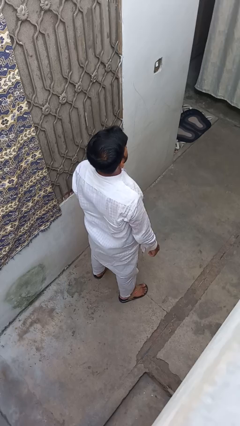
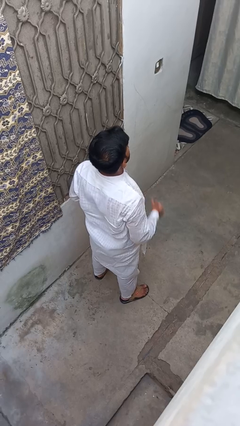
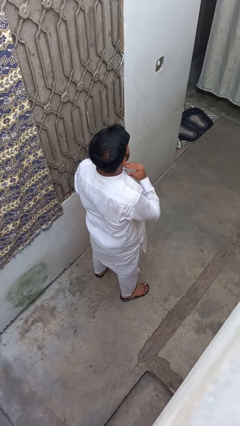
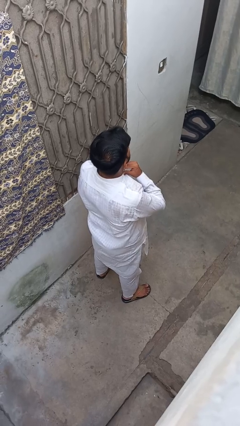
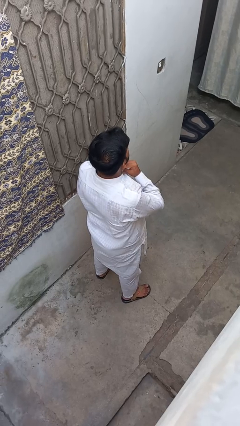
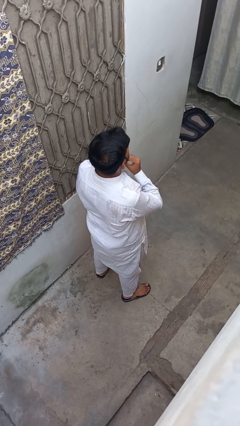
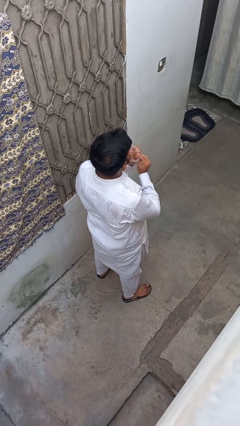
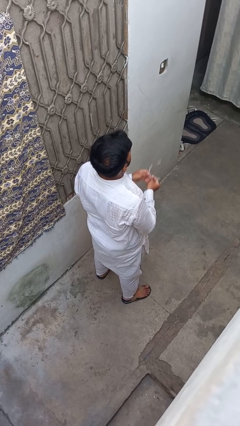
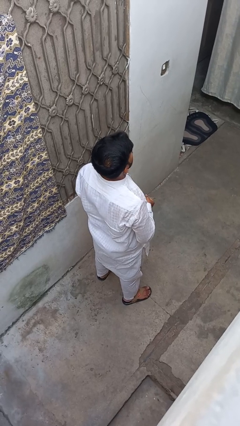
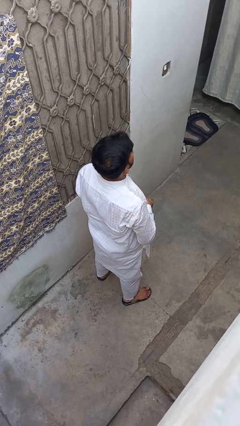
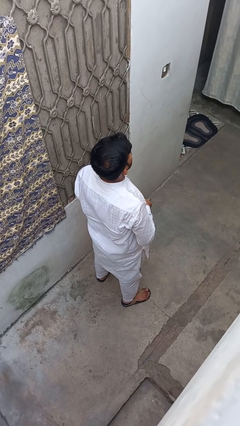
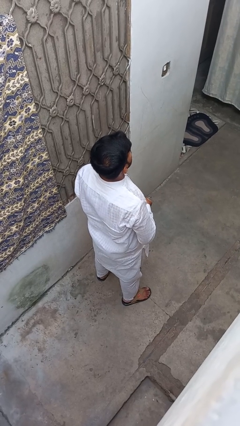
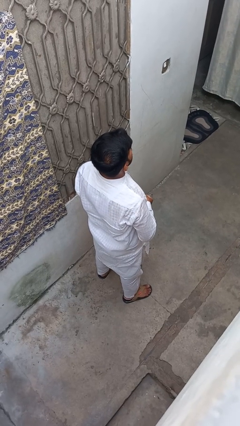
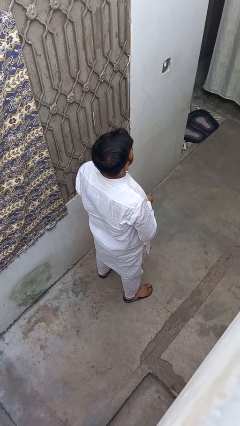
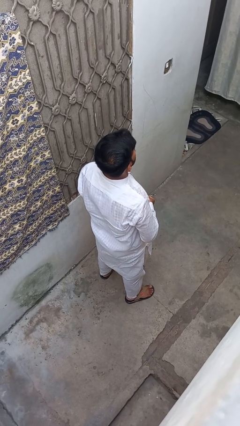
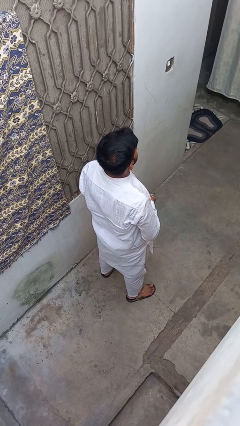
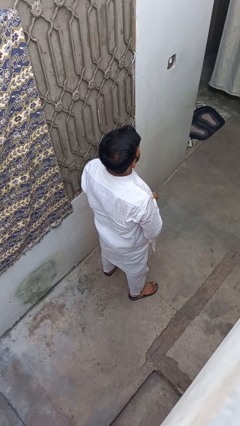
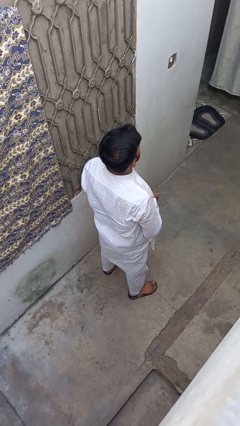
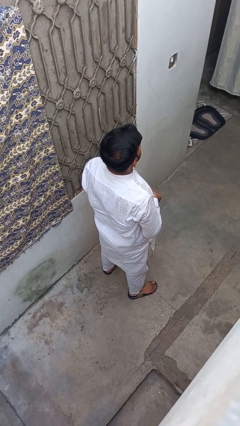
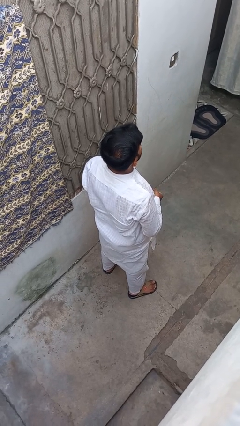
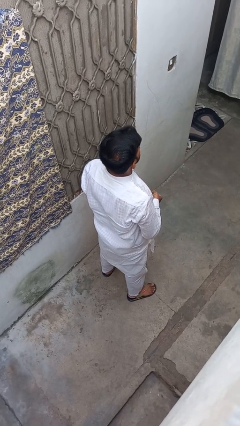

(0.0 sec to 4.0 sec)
person takes off necklace

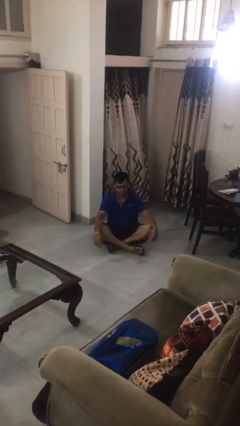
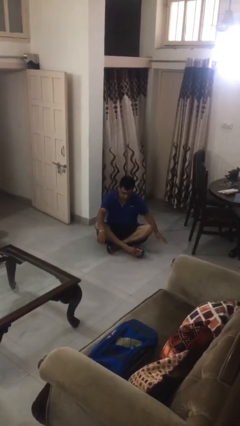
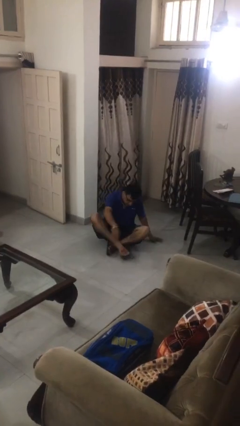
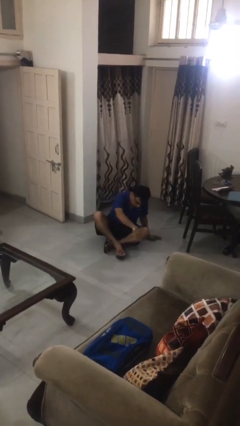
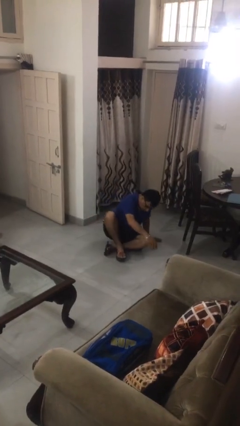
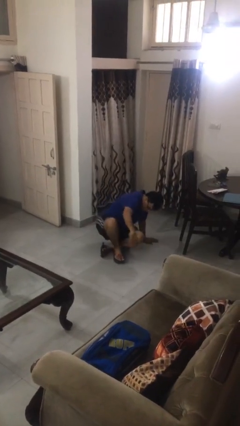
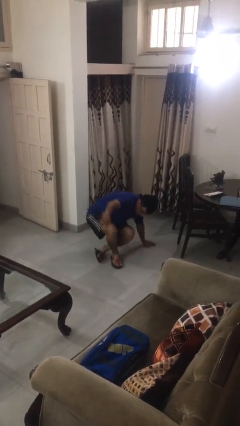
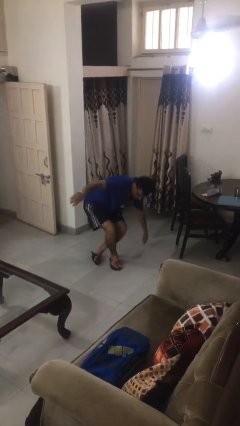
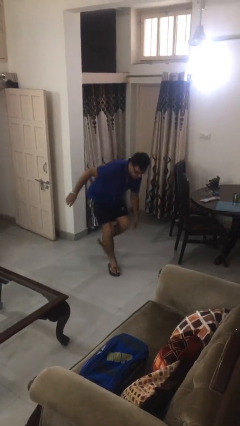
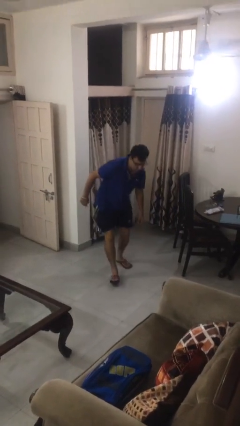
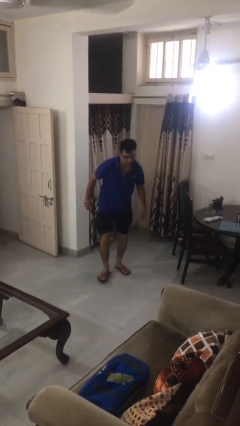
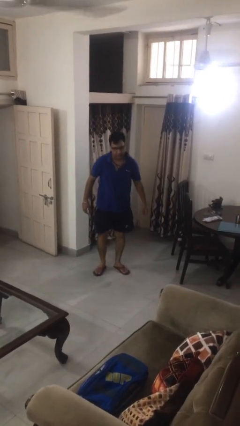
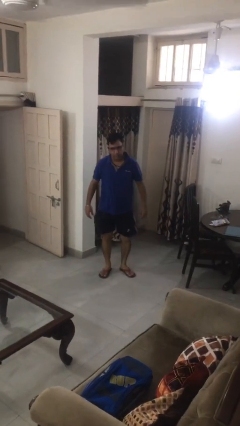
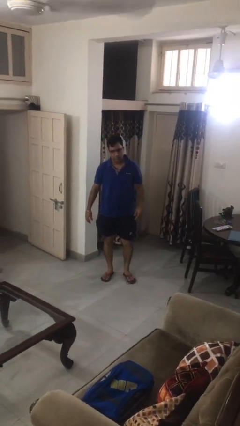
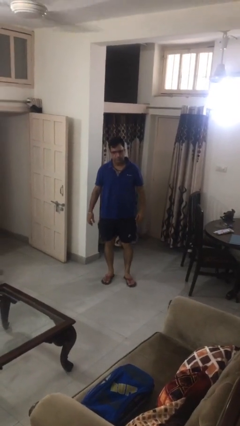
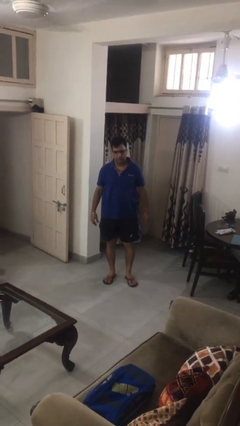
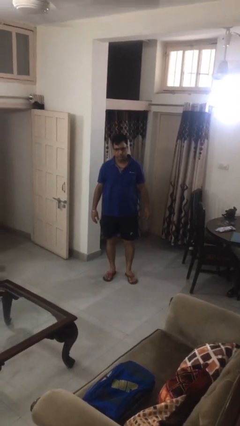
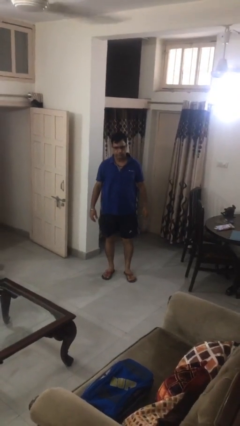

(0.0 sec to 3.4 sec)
person stands up from floor

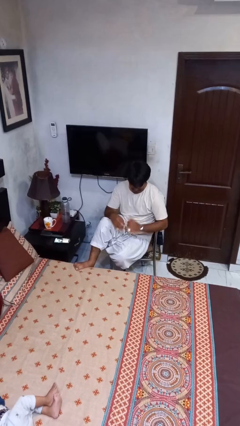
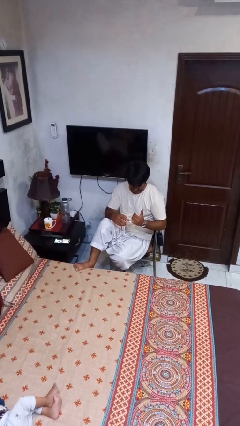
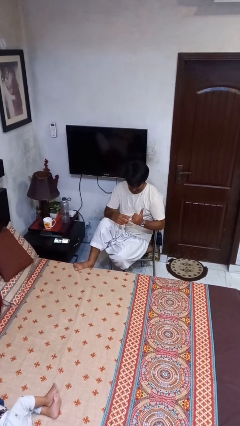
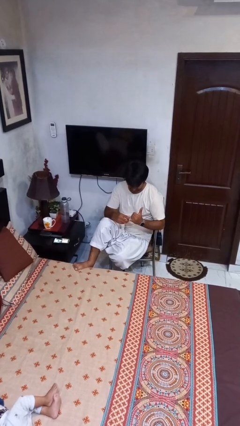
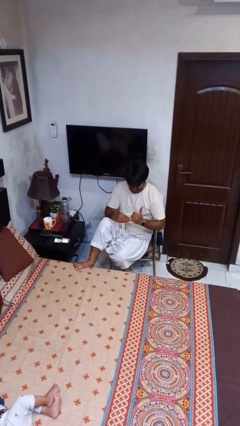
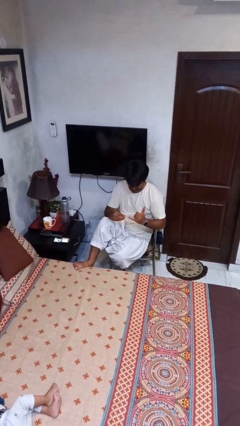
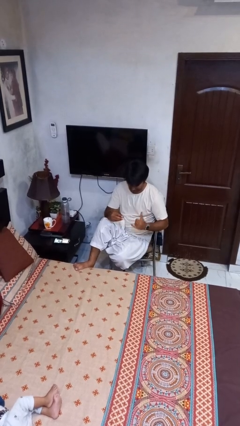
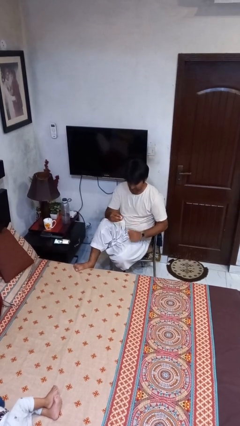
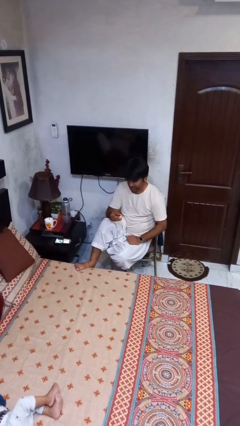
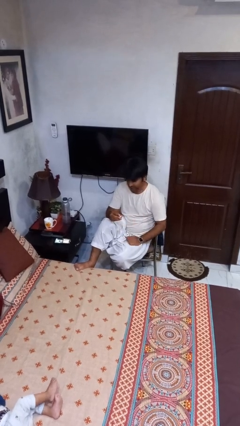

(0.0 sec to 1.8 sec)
person takes off ring

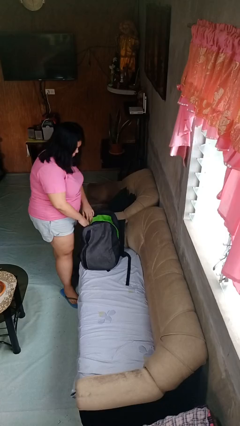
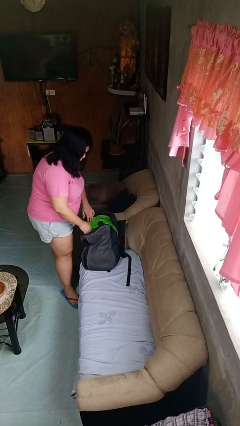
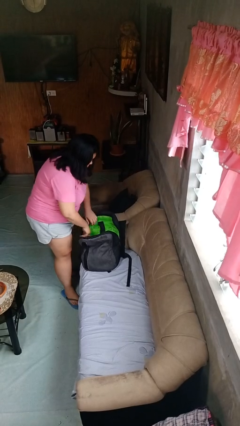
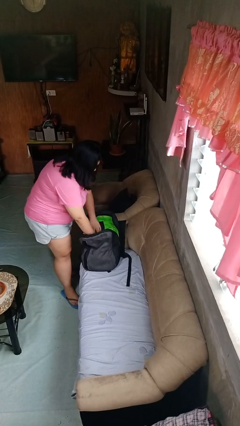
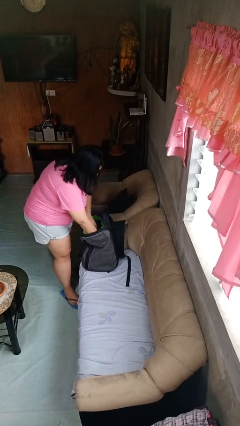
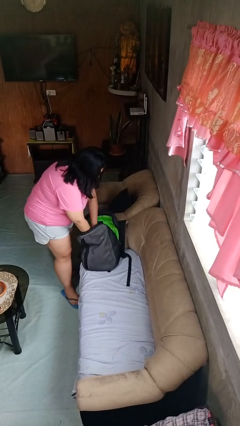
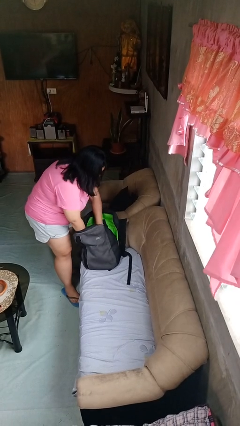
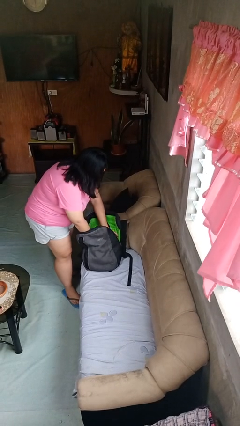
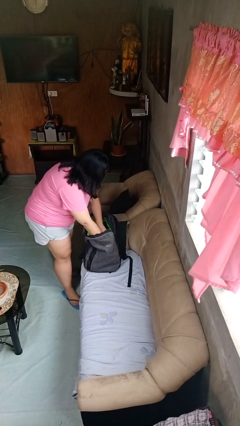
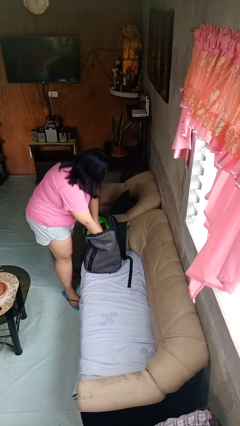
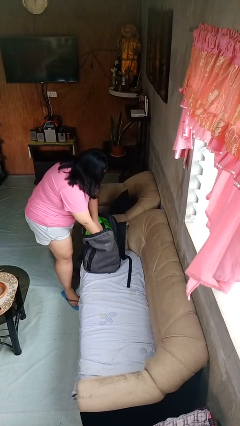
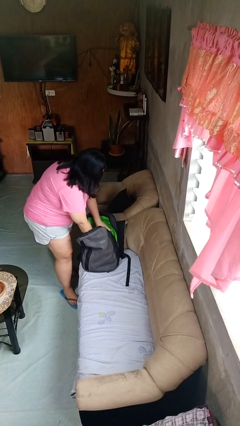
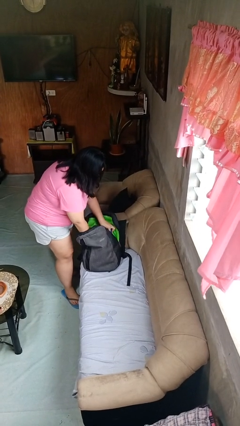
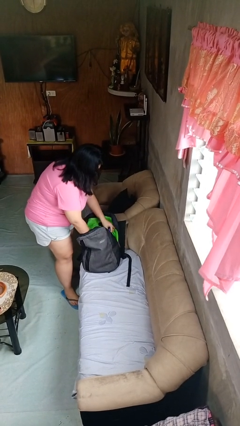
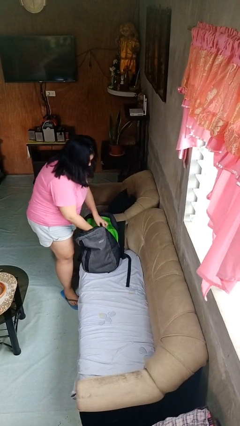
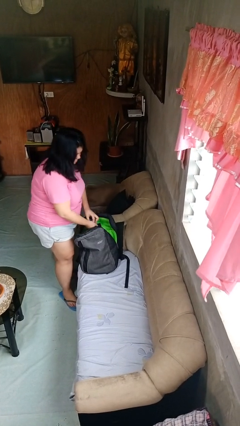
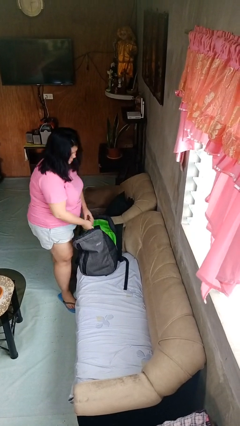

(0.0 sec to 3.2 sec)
person searches in backpack

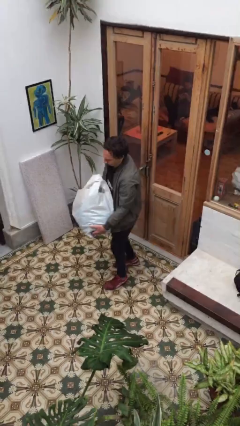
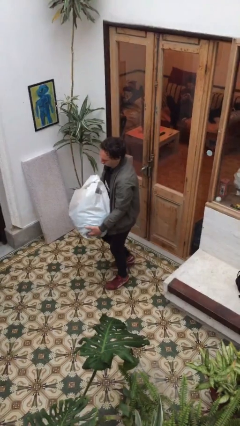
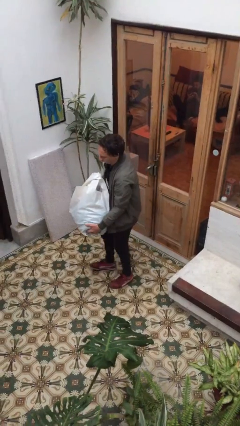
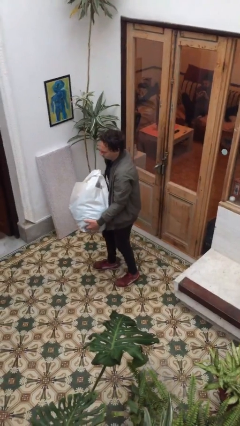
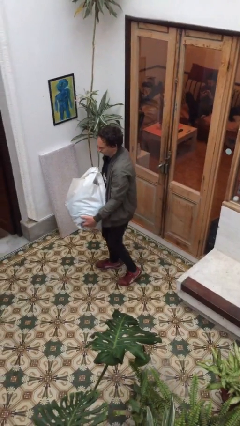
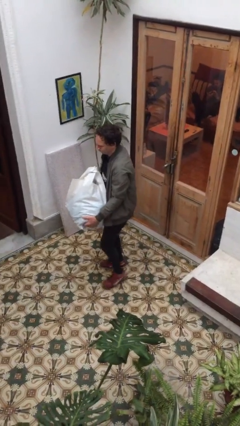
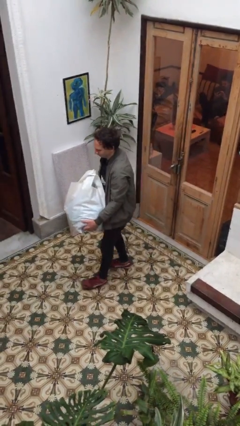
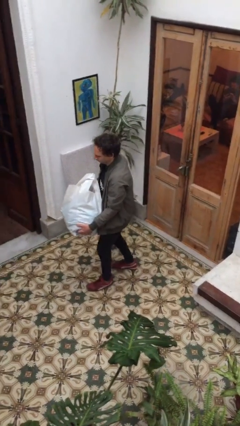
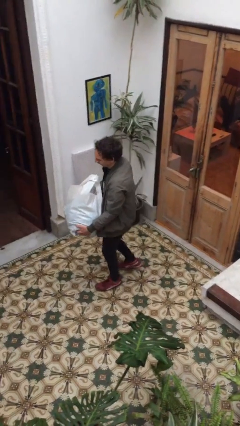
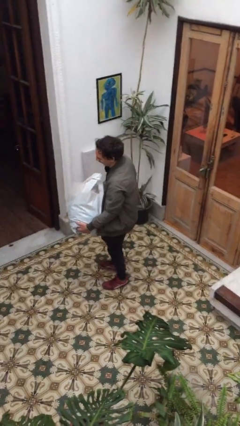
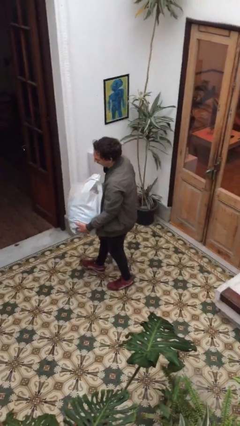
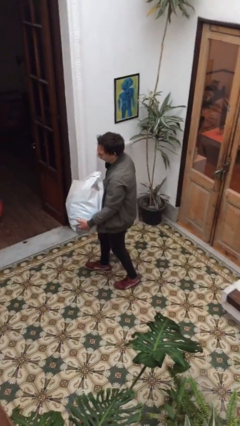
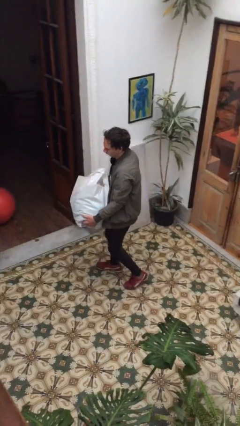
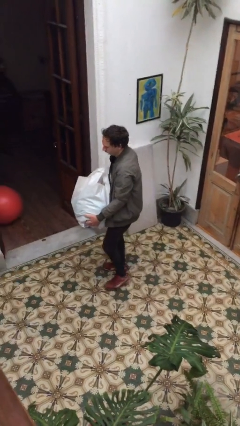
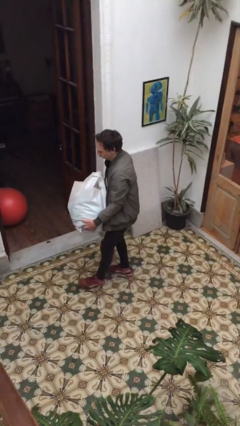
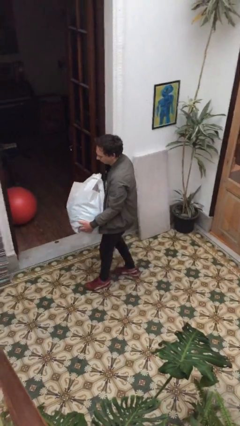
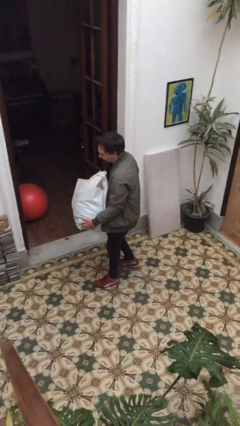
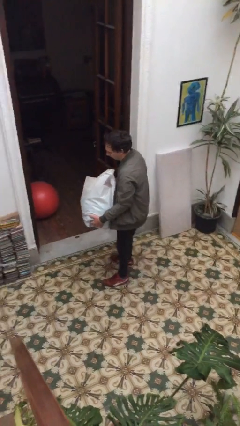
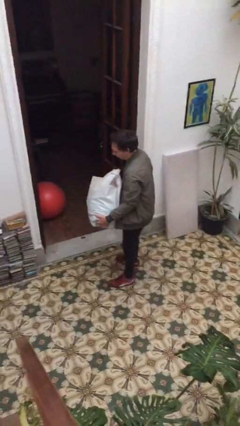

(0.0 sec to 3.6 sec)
person carries heavy object

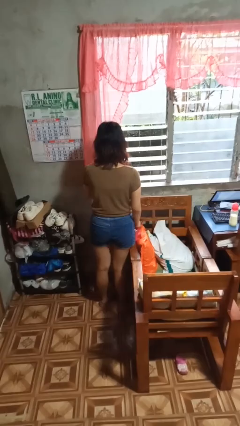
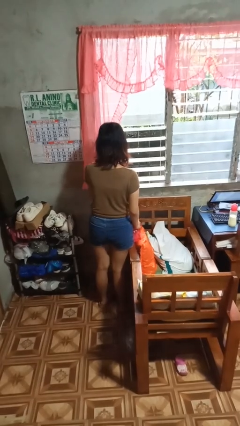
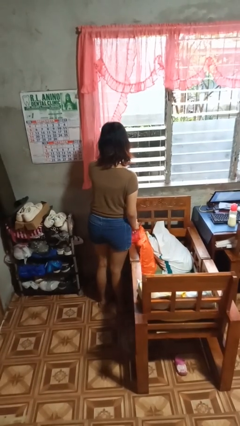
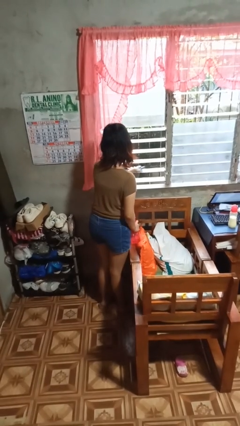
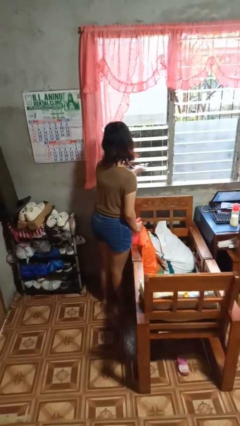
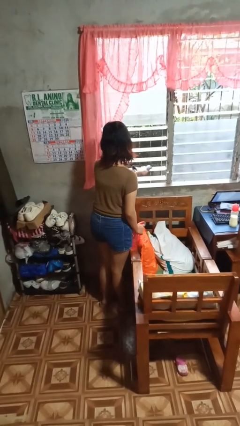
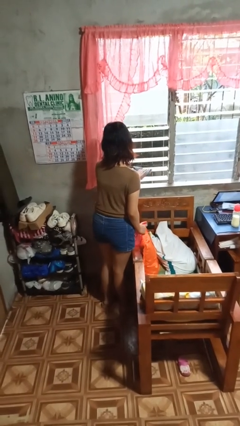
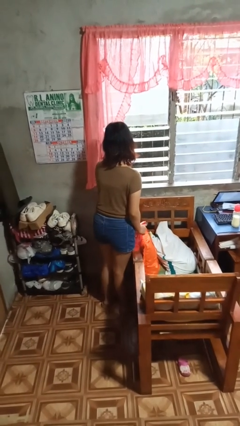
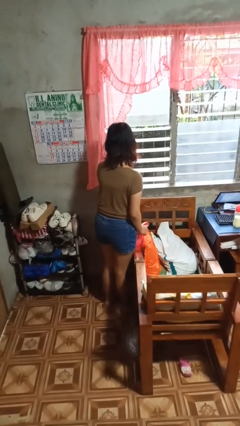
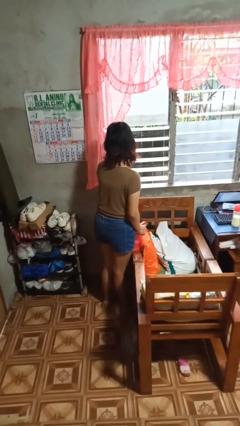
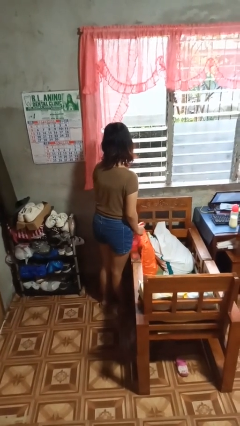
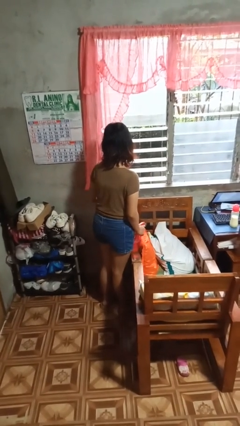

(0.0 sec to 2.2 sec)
person washes window
